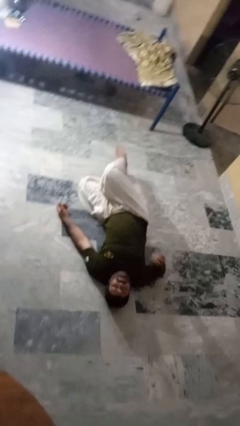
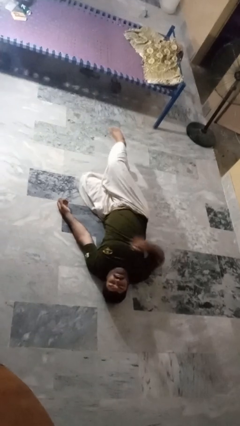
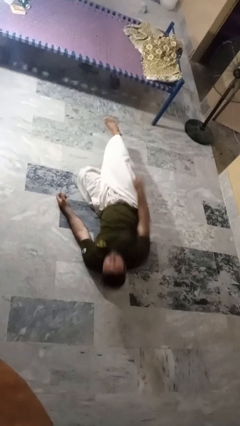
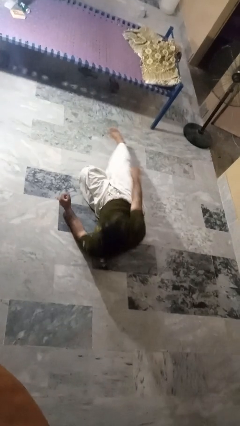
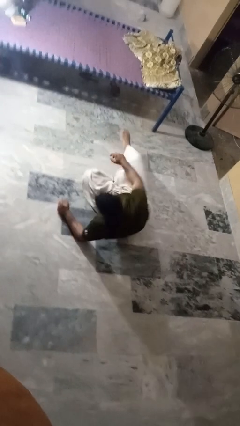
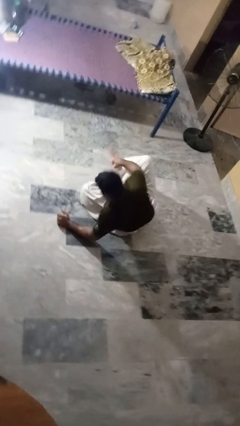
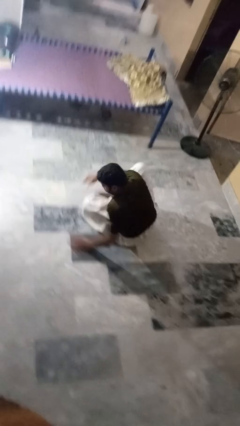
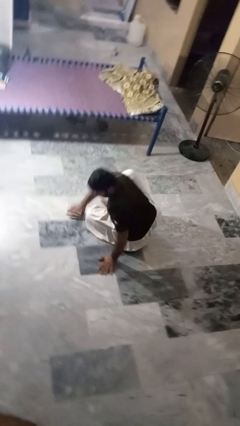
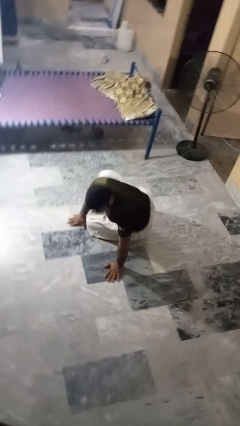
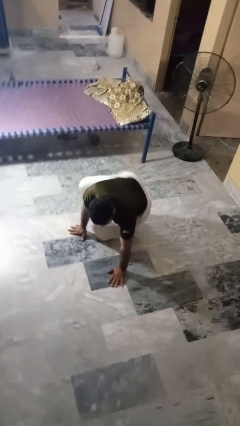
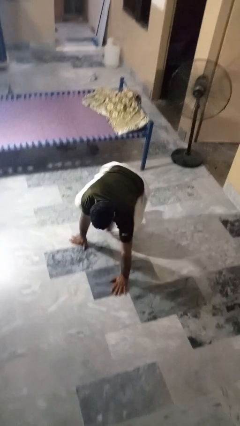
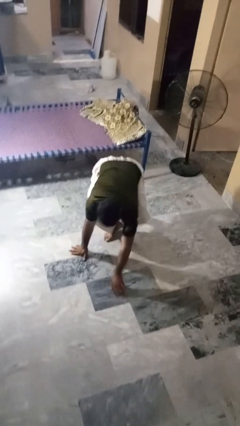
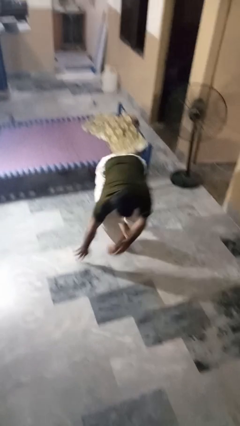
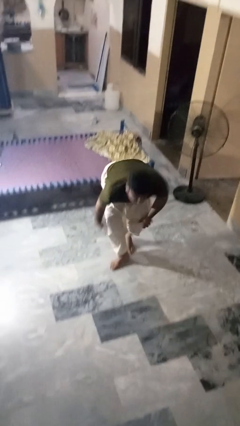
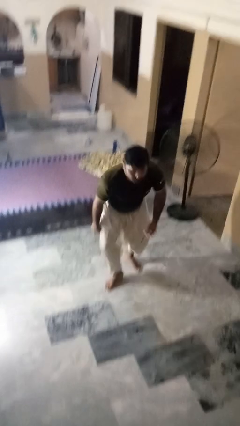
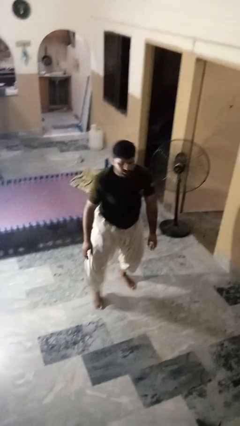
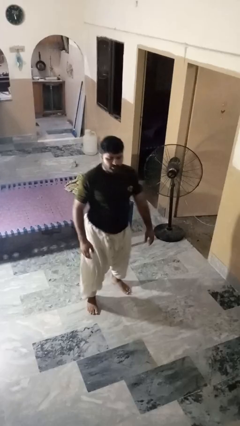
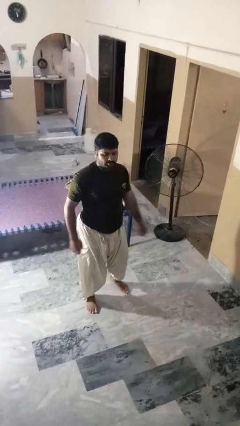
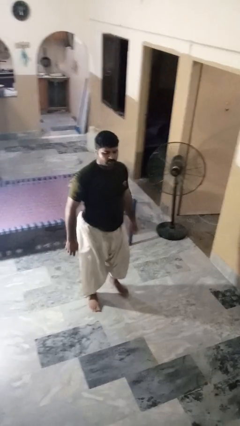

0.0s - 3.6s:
person stands up from floor

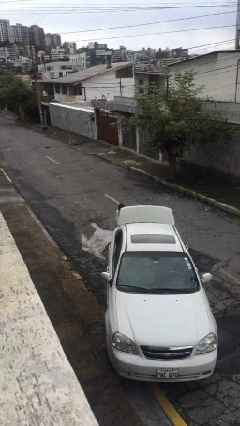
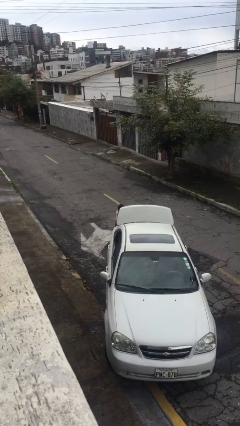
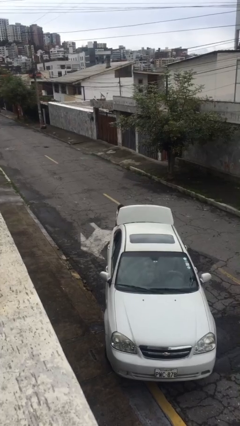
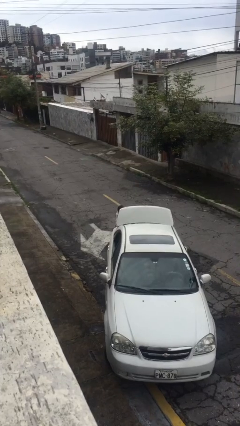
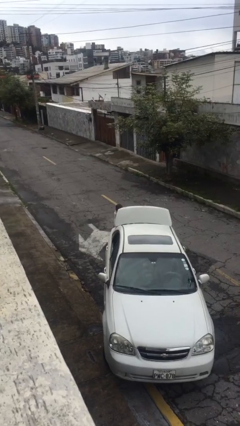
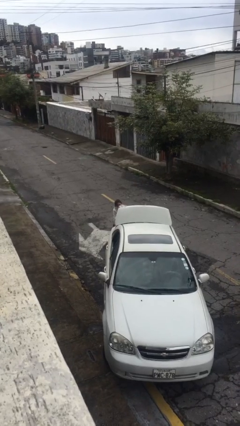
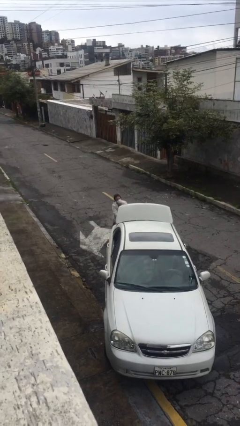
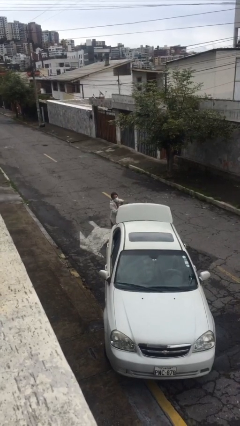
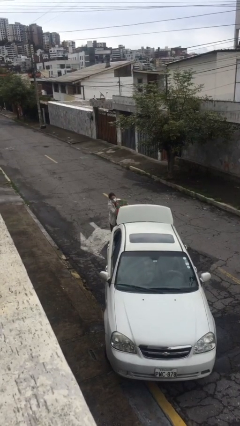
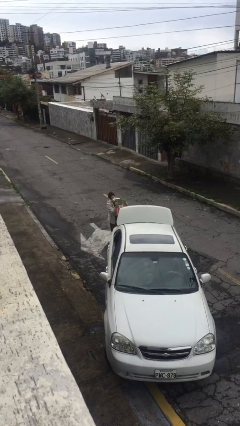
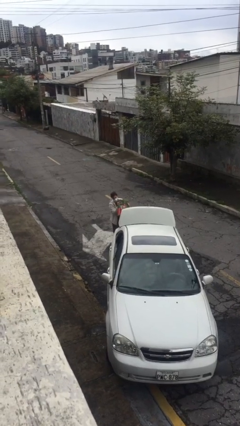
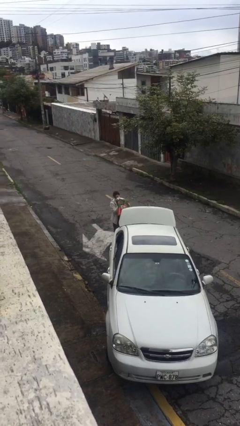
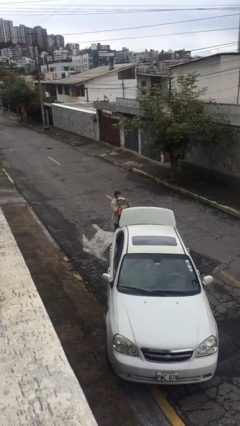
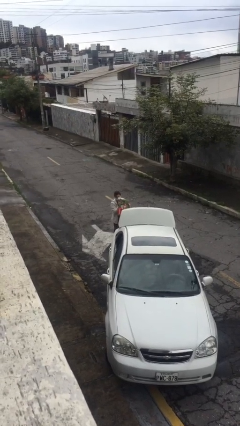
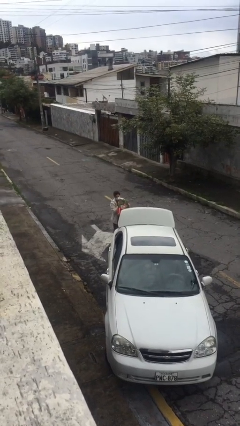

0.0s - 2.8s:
person unloads car

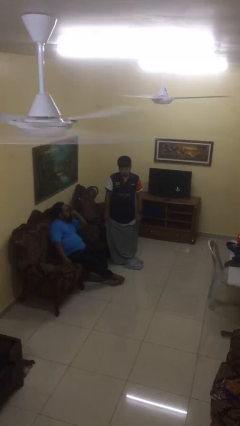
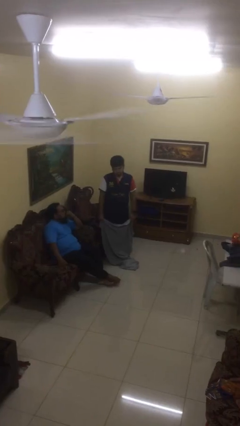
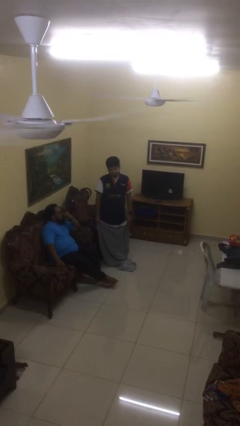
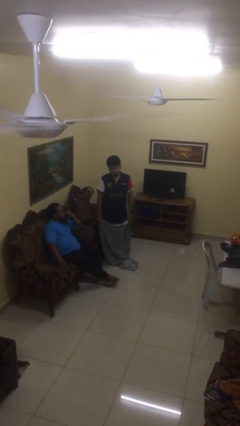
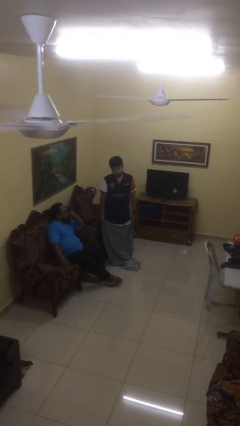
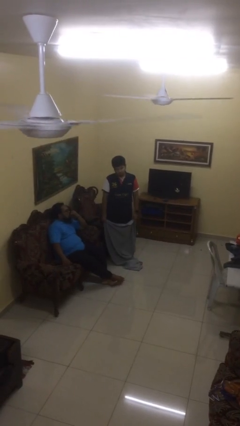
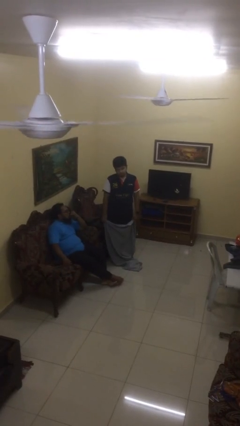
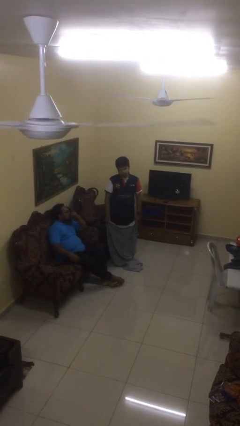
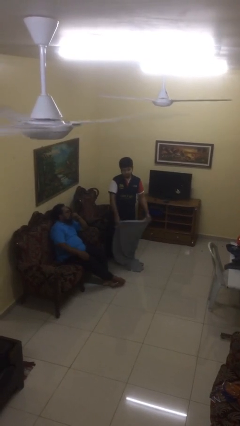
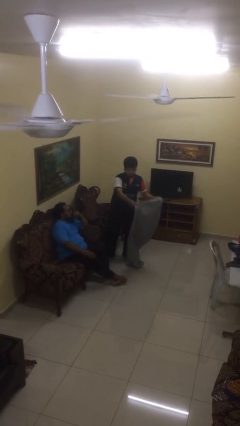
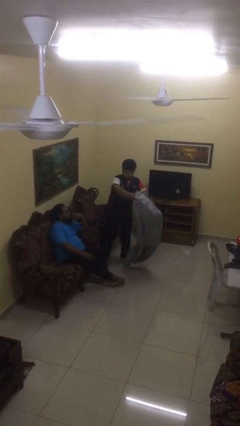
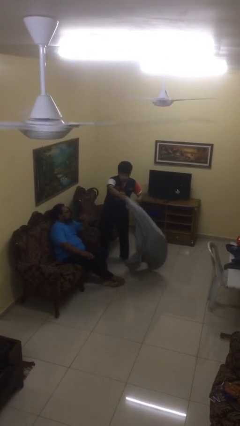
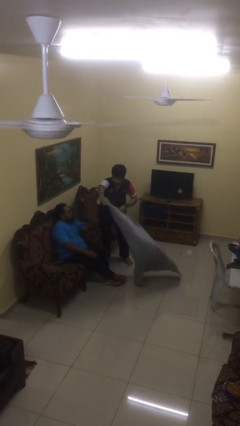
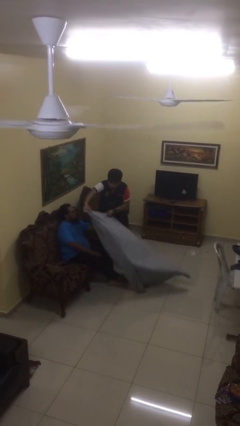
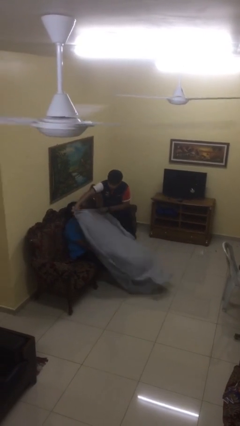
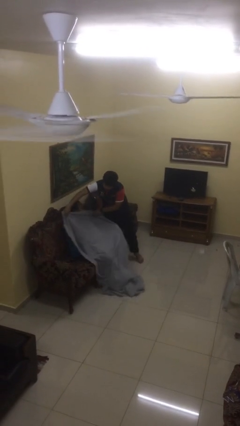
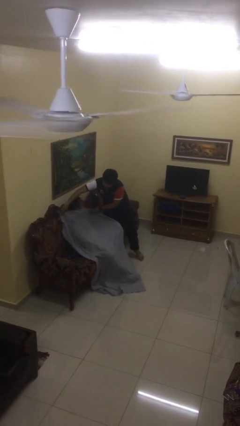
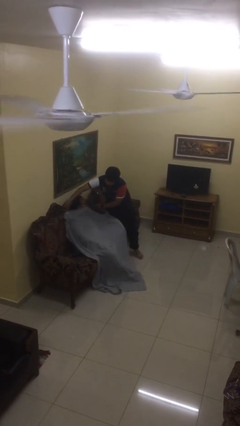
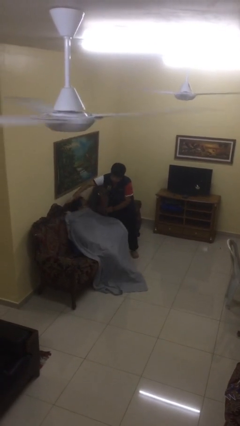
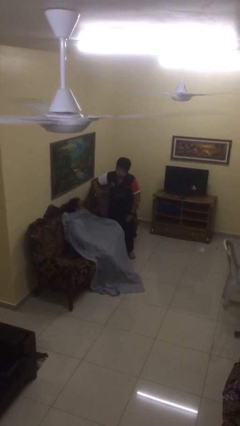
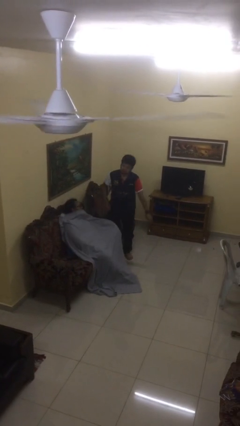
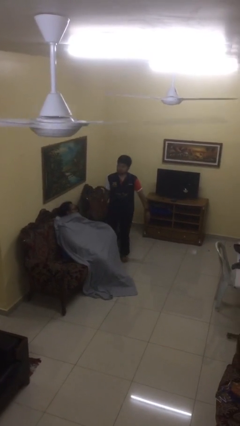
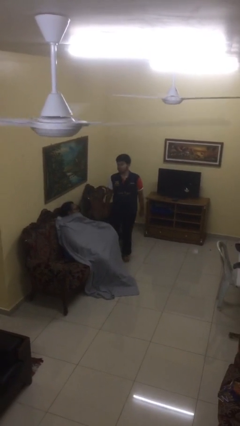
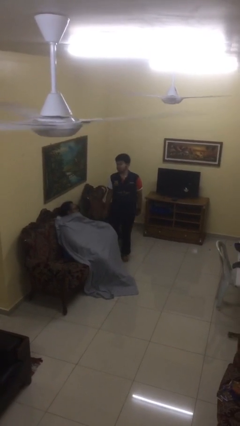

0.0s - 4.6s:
person covers friend with blanket

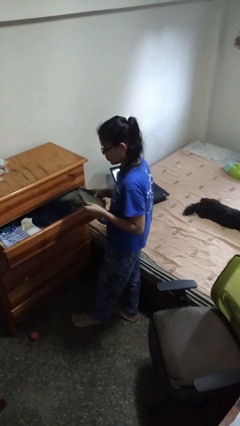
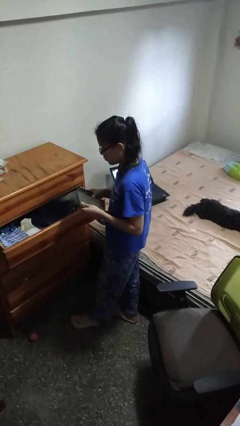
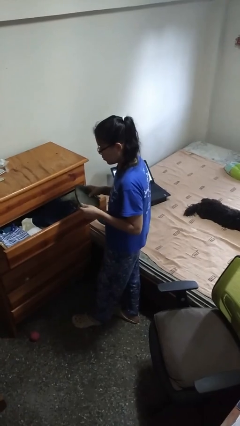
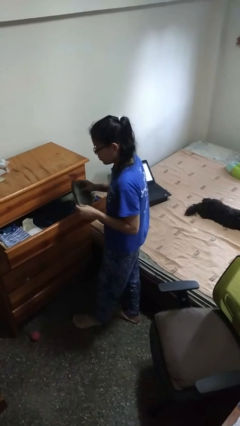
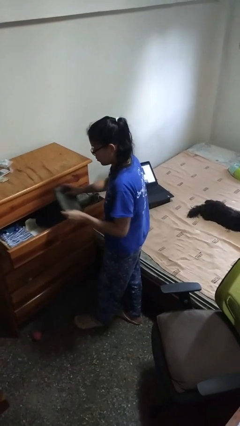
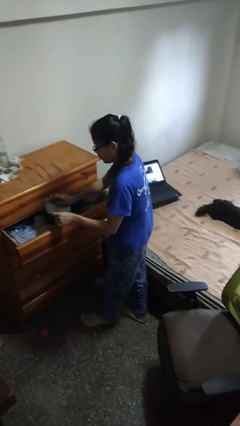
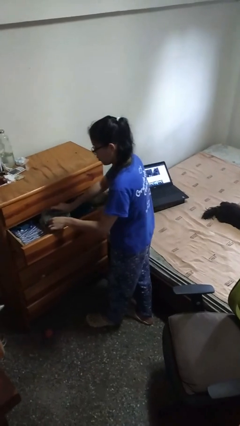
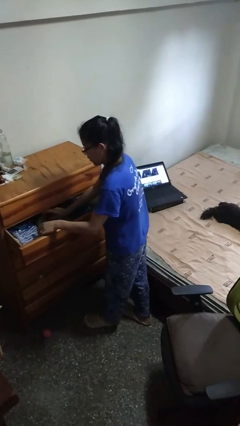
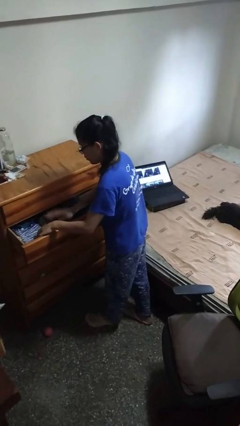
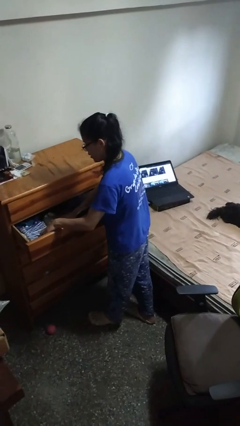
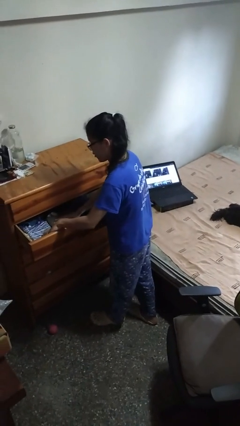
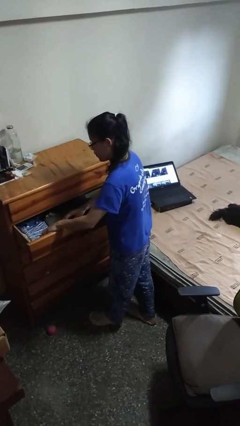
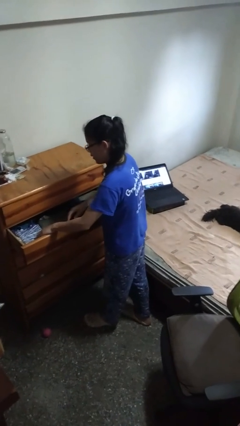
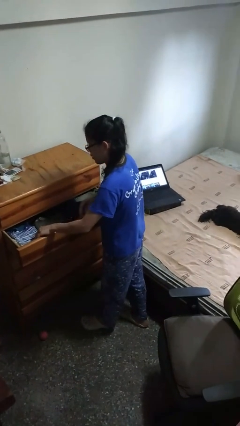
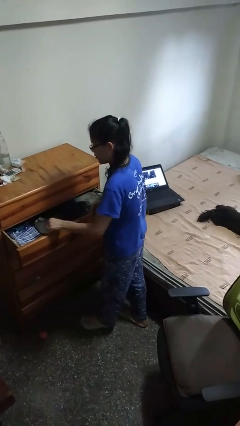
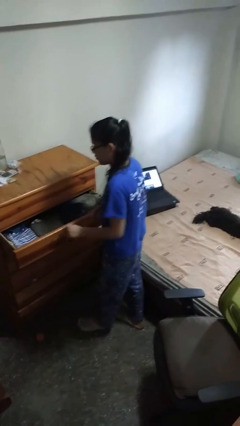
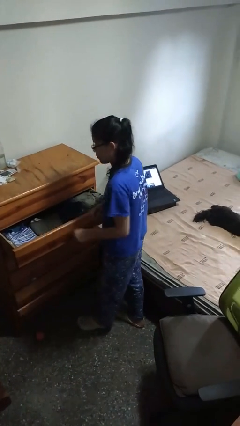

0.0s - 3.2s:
person puts clothes into dresser

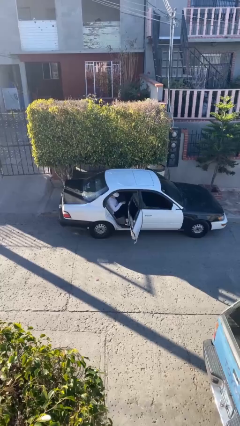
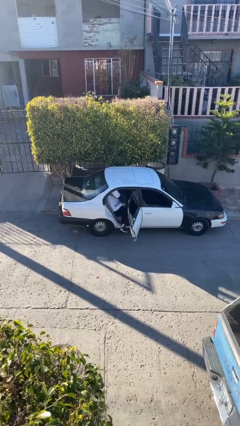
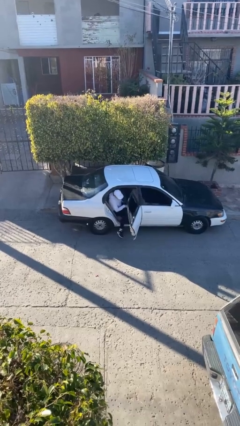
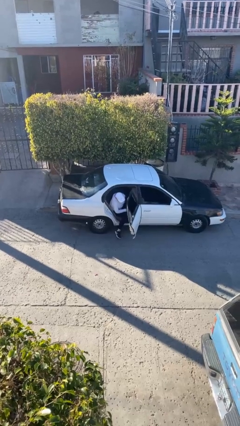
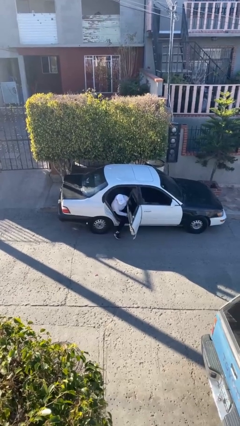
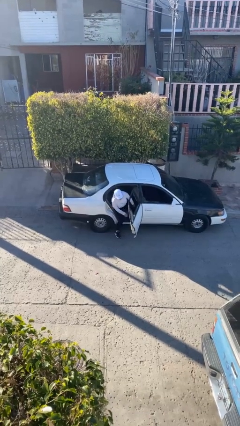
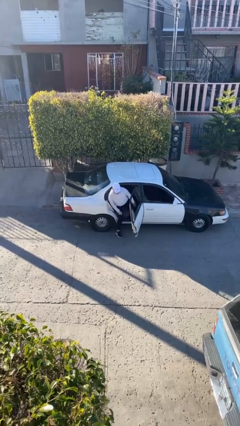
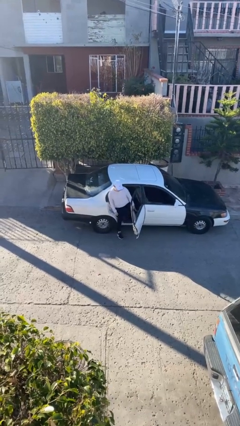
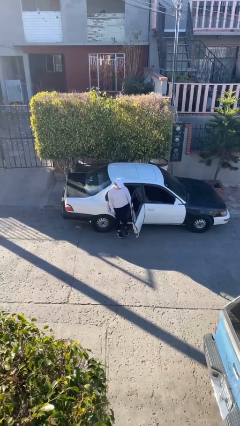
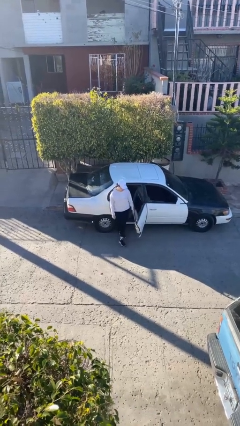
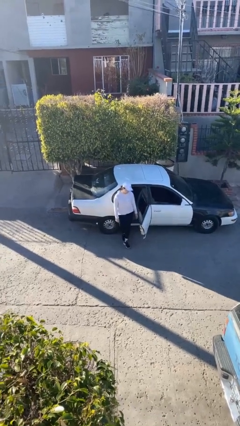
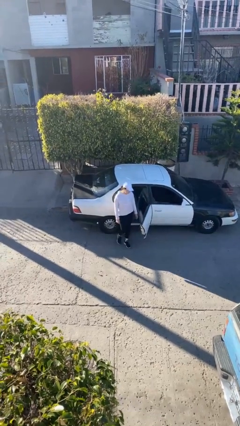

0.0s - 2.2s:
person exits car

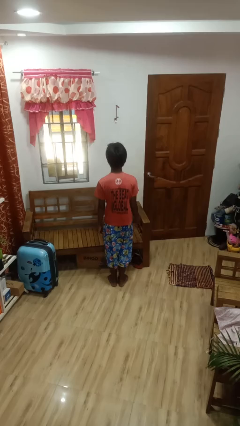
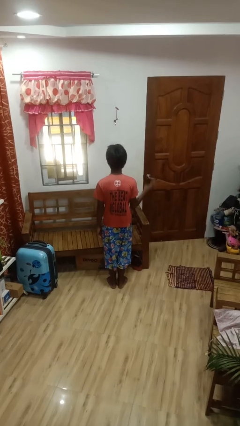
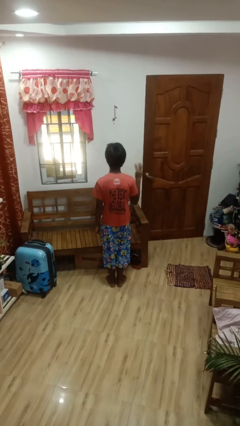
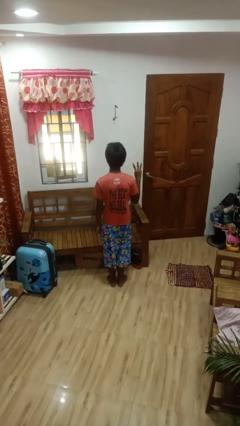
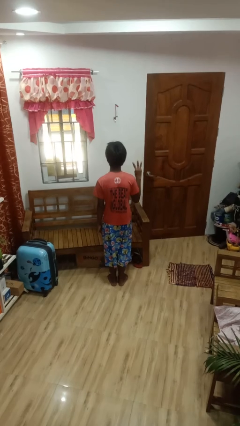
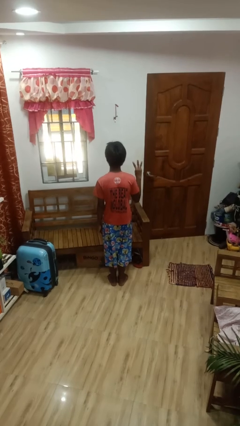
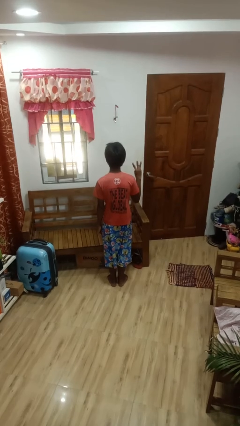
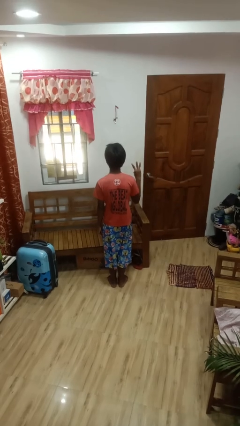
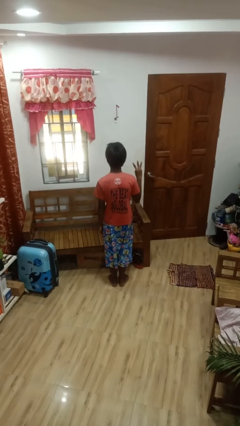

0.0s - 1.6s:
person gestures number three
